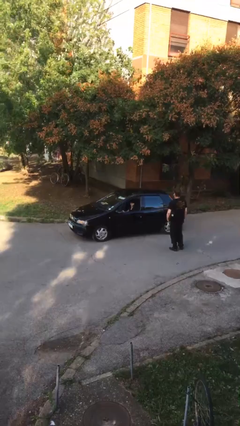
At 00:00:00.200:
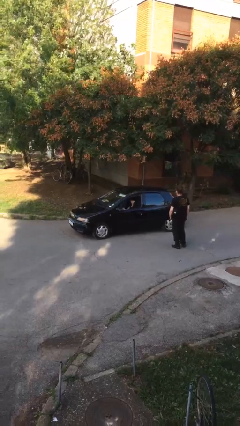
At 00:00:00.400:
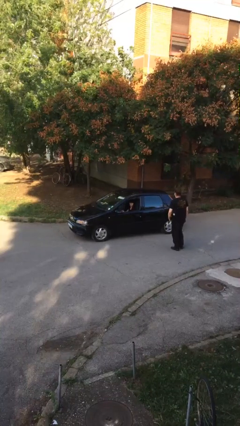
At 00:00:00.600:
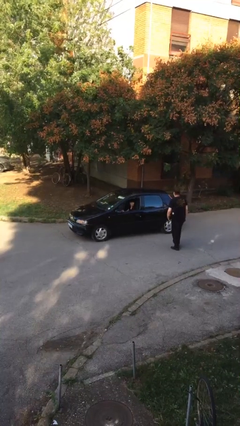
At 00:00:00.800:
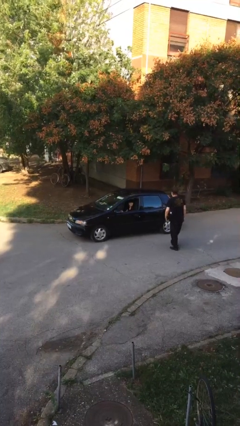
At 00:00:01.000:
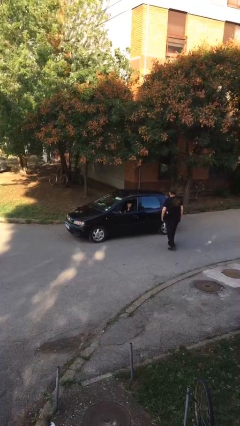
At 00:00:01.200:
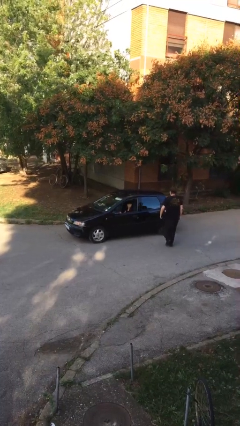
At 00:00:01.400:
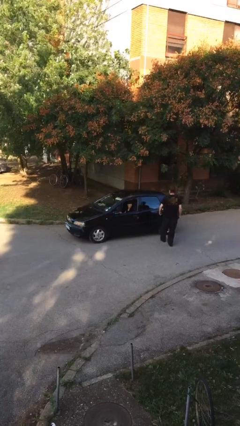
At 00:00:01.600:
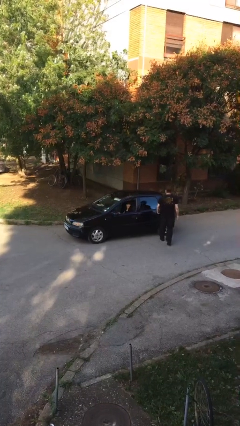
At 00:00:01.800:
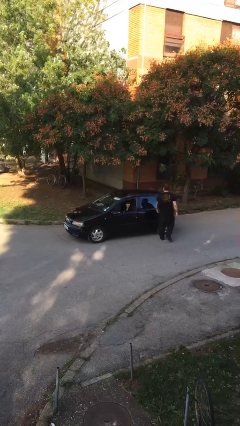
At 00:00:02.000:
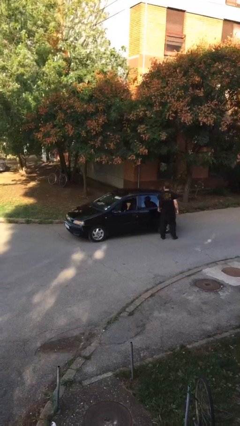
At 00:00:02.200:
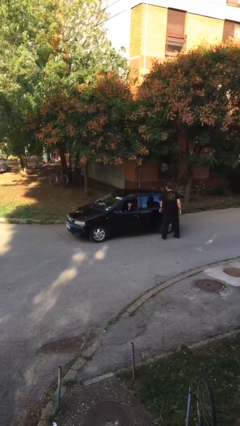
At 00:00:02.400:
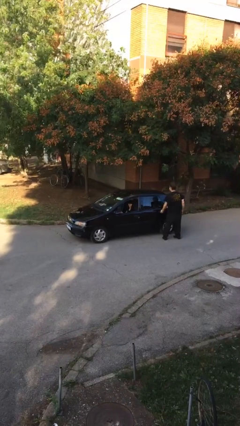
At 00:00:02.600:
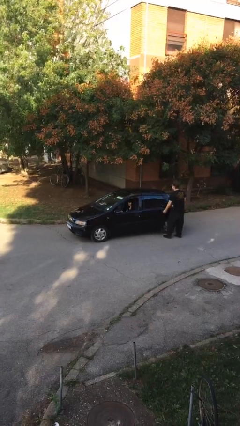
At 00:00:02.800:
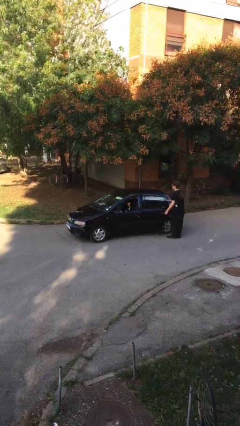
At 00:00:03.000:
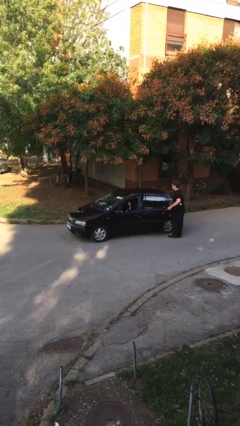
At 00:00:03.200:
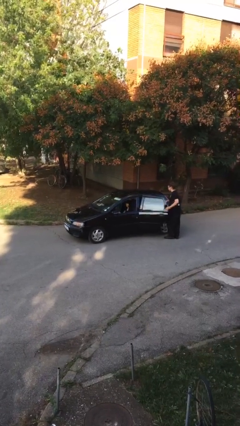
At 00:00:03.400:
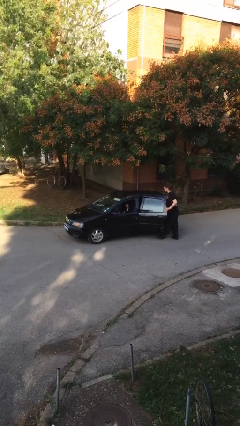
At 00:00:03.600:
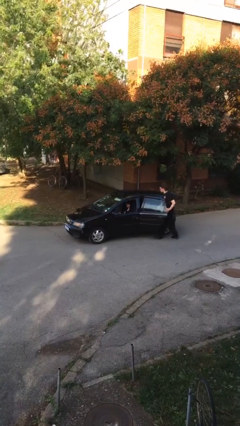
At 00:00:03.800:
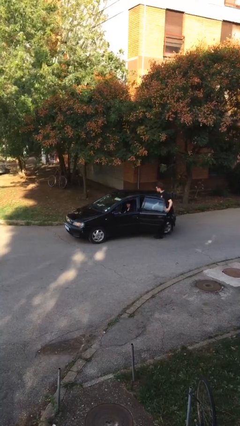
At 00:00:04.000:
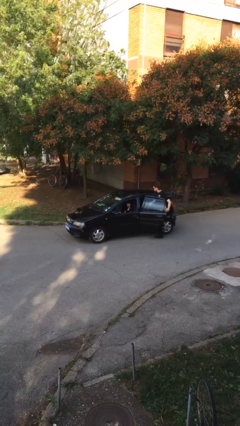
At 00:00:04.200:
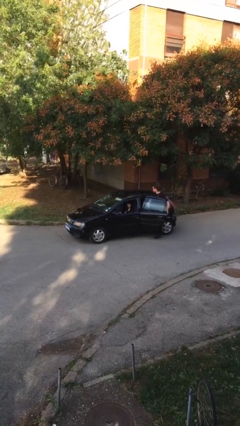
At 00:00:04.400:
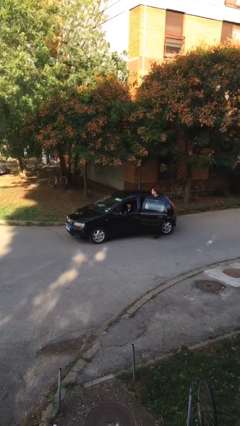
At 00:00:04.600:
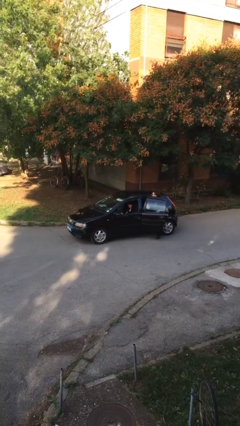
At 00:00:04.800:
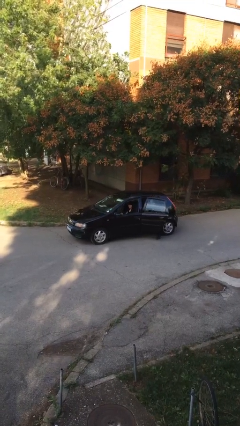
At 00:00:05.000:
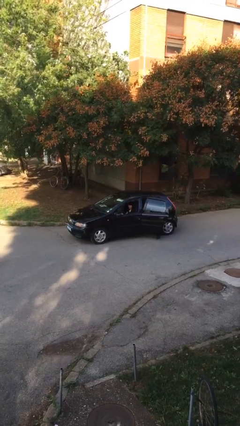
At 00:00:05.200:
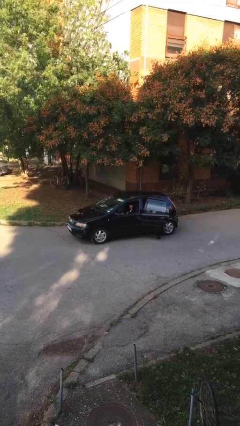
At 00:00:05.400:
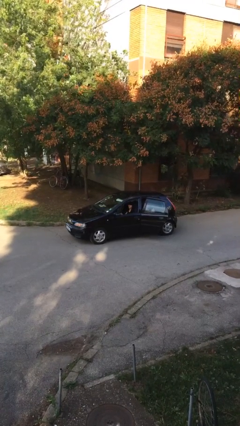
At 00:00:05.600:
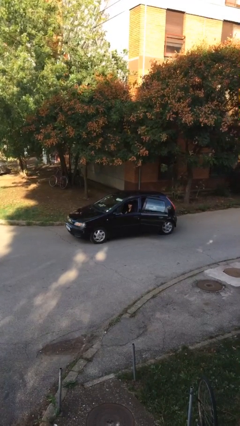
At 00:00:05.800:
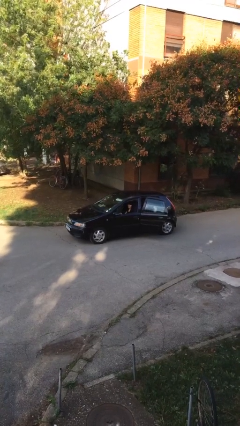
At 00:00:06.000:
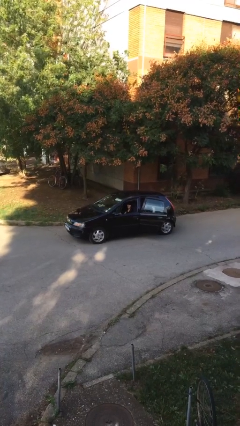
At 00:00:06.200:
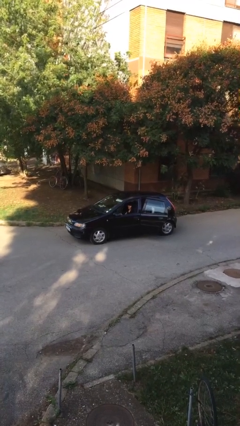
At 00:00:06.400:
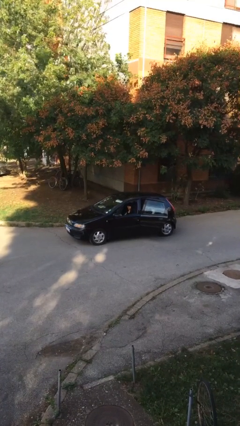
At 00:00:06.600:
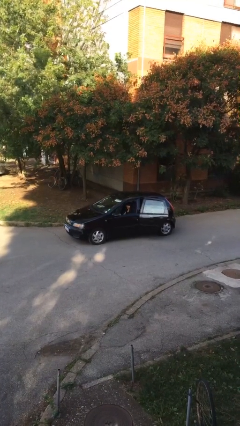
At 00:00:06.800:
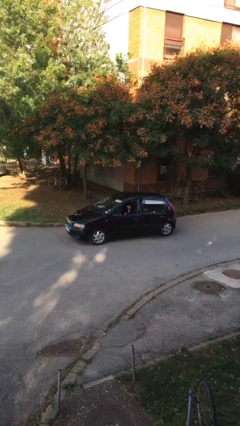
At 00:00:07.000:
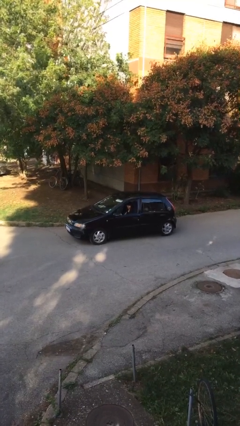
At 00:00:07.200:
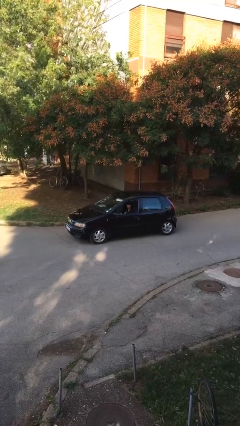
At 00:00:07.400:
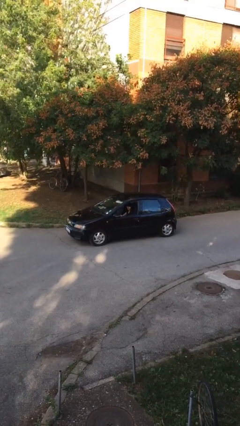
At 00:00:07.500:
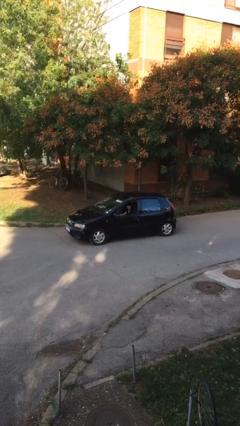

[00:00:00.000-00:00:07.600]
car picks up person

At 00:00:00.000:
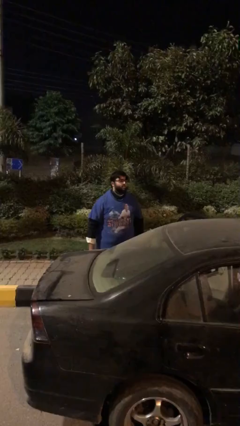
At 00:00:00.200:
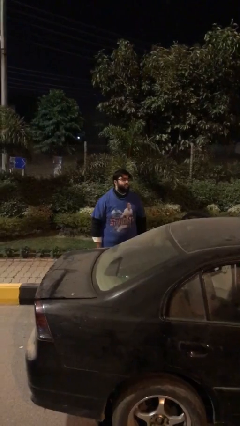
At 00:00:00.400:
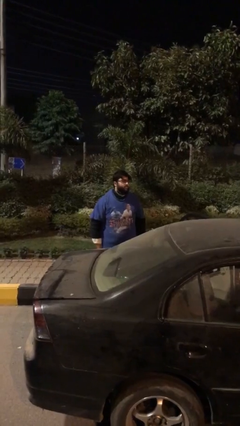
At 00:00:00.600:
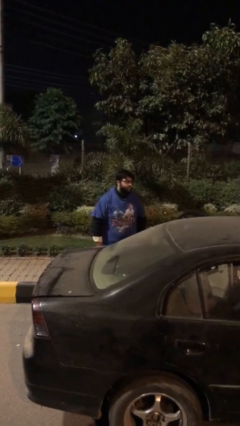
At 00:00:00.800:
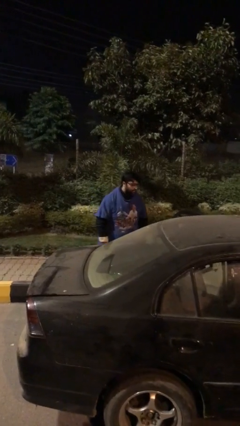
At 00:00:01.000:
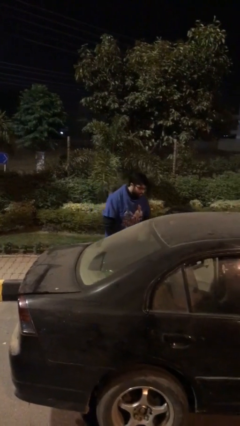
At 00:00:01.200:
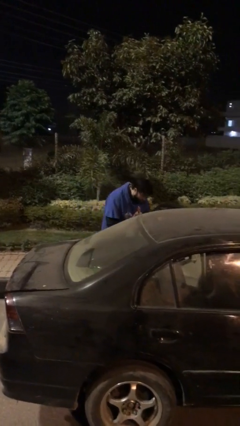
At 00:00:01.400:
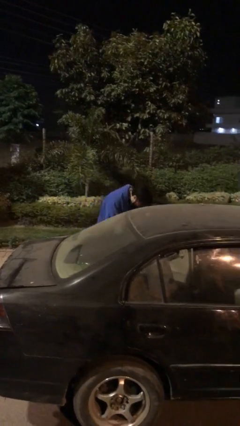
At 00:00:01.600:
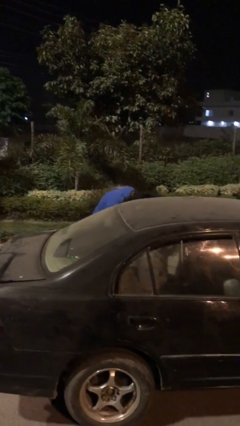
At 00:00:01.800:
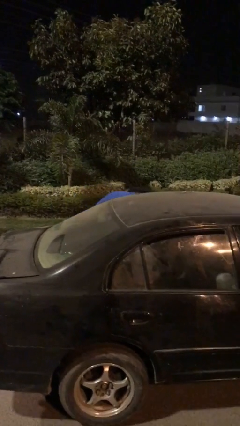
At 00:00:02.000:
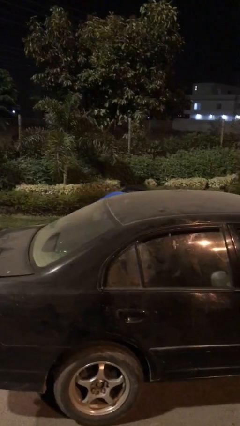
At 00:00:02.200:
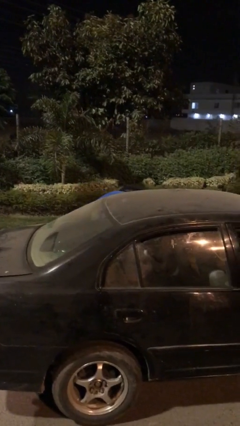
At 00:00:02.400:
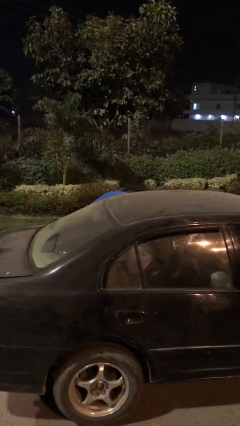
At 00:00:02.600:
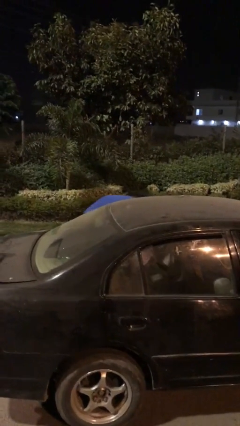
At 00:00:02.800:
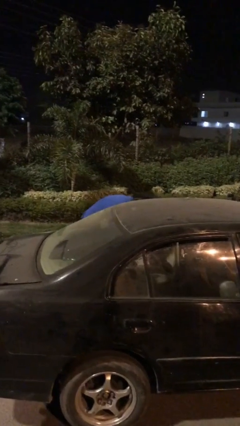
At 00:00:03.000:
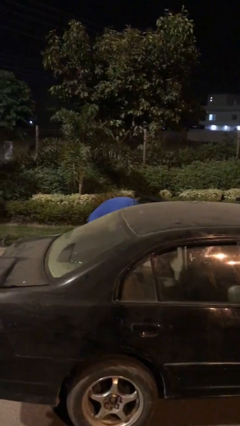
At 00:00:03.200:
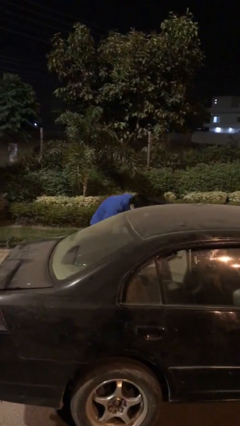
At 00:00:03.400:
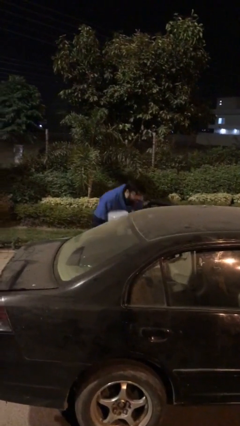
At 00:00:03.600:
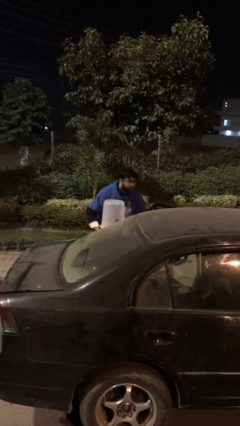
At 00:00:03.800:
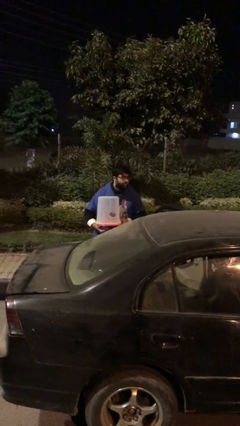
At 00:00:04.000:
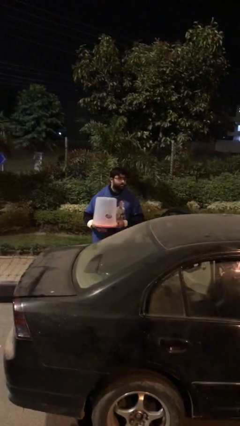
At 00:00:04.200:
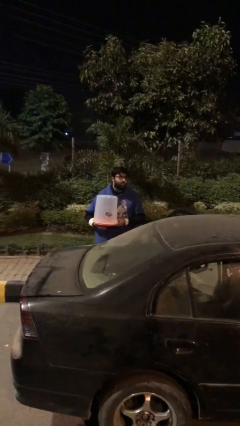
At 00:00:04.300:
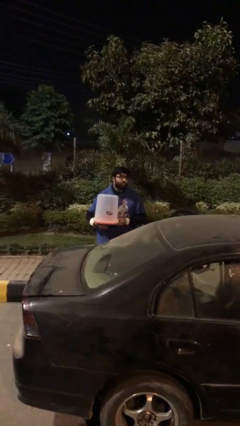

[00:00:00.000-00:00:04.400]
person unloads car

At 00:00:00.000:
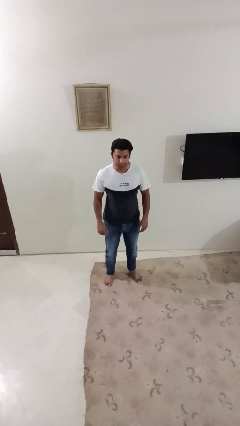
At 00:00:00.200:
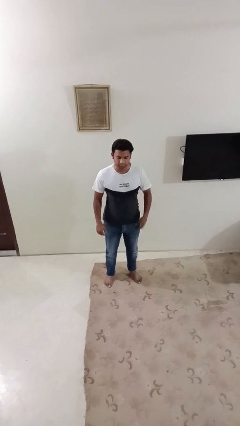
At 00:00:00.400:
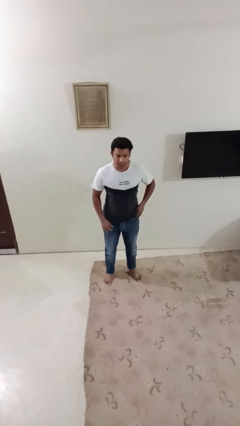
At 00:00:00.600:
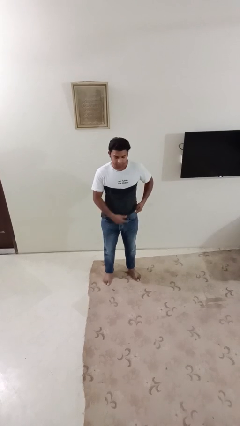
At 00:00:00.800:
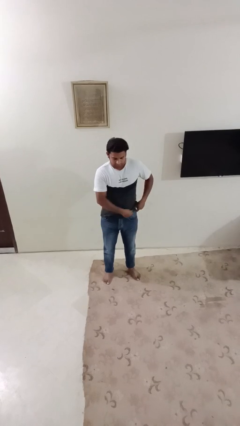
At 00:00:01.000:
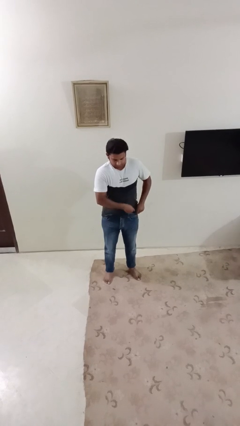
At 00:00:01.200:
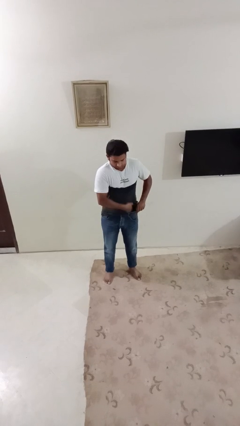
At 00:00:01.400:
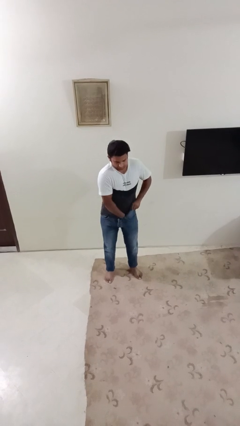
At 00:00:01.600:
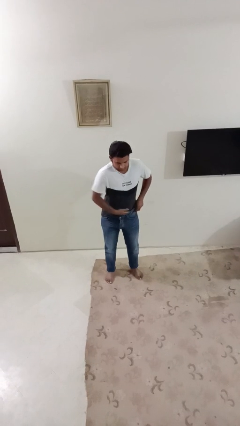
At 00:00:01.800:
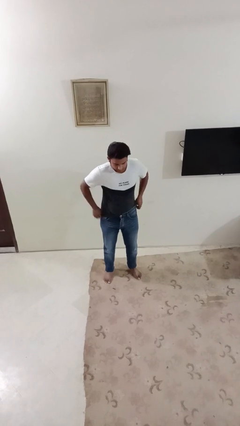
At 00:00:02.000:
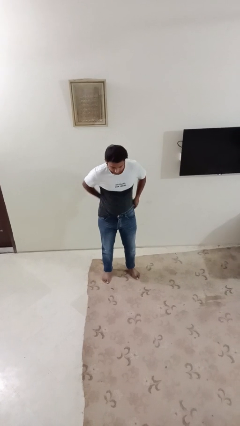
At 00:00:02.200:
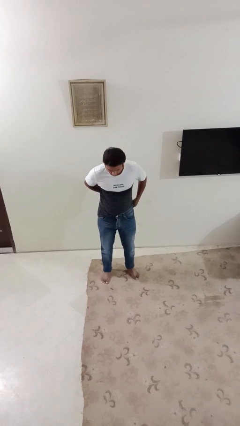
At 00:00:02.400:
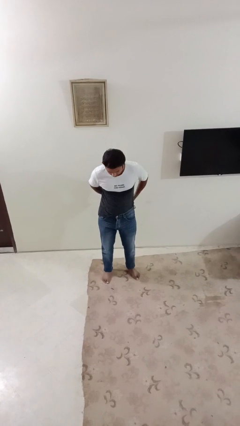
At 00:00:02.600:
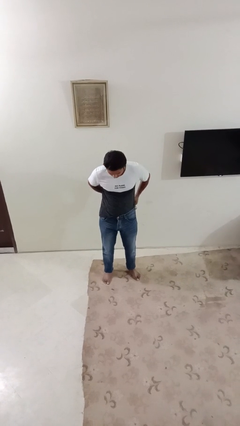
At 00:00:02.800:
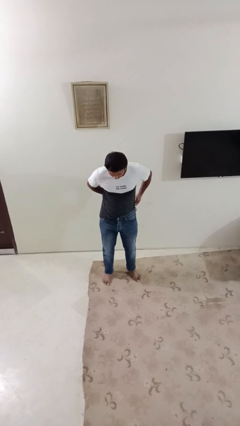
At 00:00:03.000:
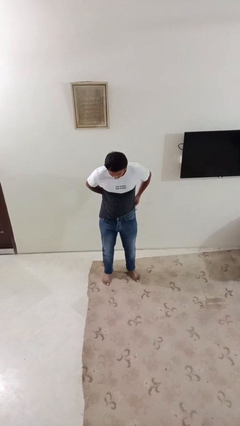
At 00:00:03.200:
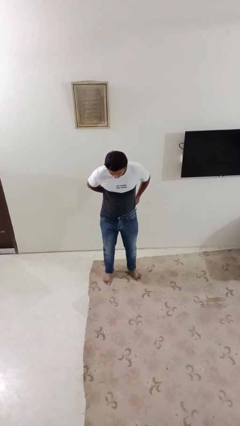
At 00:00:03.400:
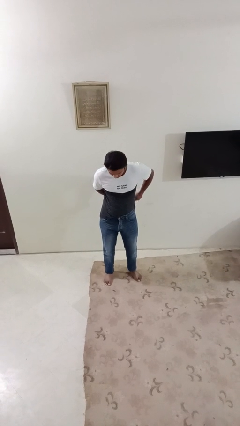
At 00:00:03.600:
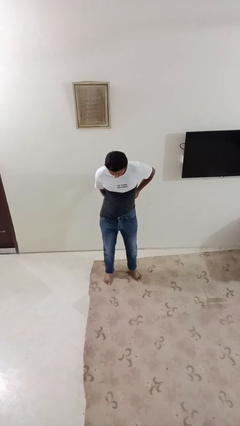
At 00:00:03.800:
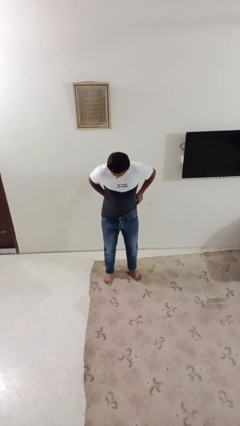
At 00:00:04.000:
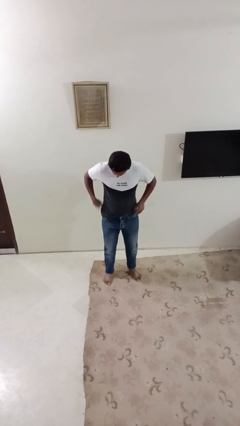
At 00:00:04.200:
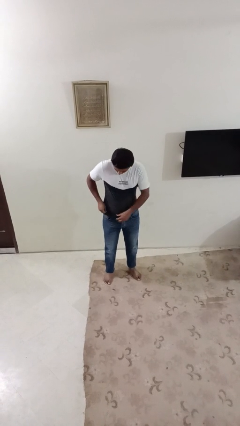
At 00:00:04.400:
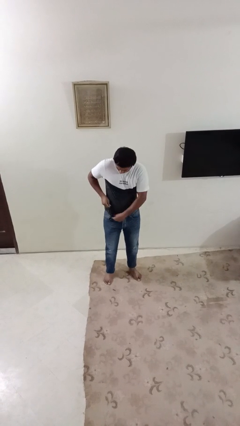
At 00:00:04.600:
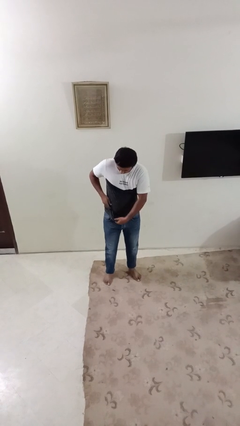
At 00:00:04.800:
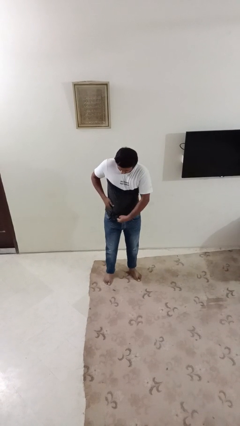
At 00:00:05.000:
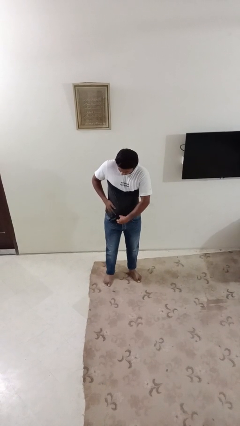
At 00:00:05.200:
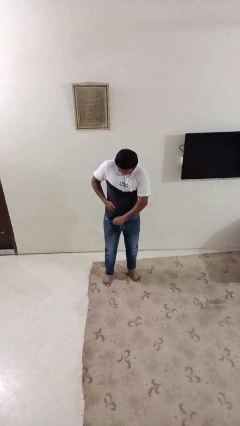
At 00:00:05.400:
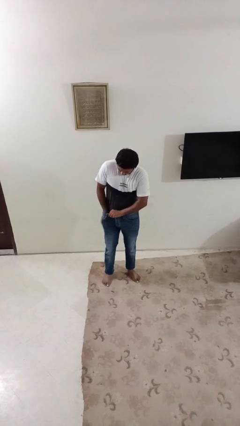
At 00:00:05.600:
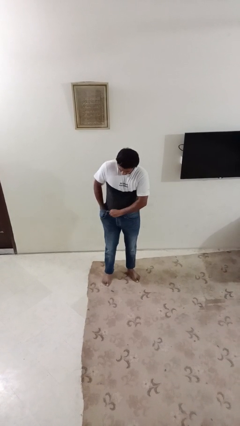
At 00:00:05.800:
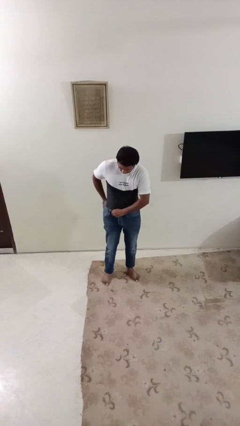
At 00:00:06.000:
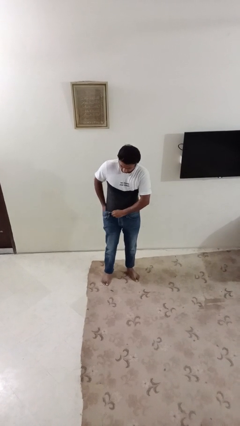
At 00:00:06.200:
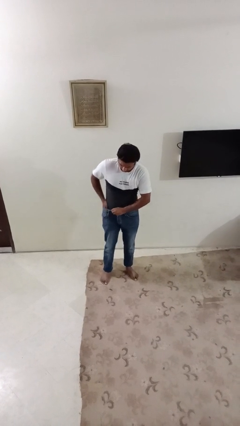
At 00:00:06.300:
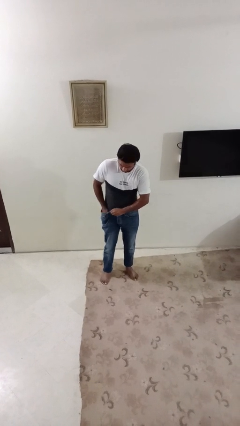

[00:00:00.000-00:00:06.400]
person tucks in shirt
